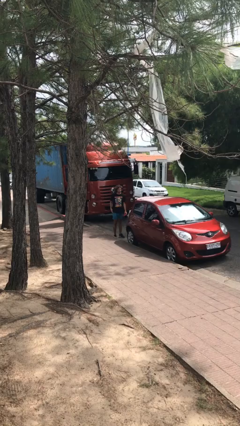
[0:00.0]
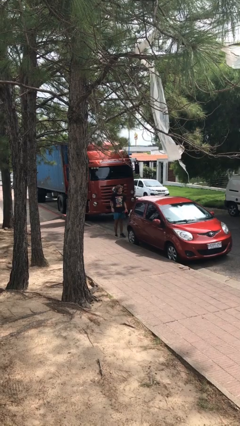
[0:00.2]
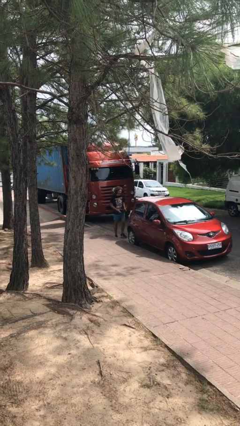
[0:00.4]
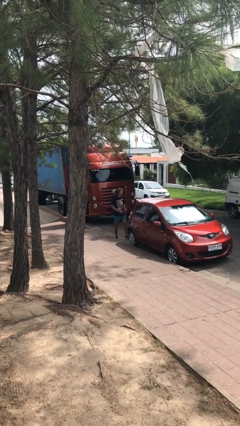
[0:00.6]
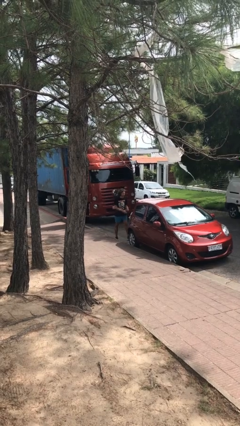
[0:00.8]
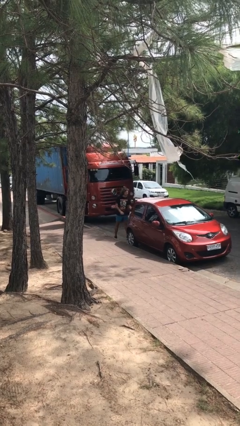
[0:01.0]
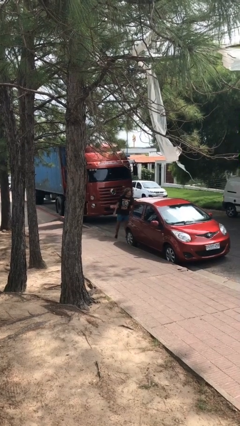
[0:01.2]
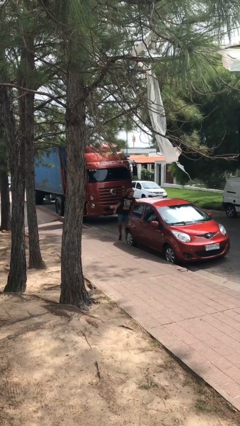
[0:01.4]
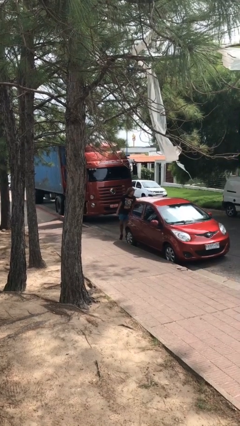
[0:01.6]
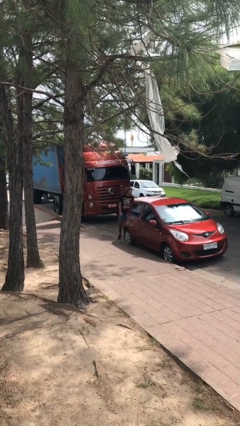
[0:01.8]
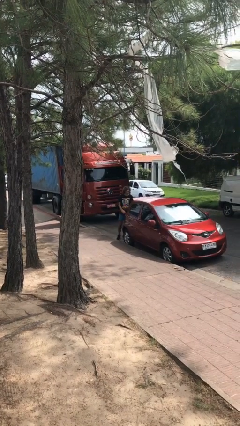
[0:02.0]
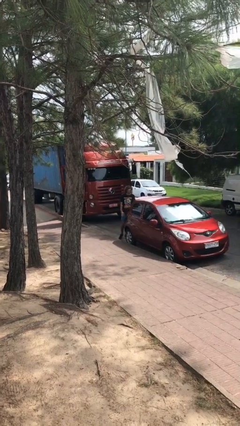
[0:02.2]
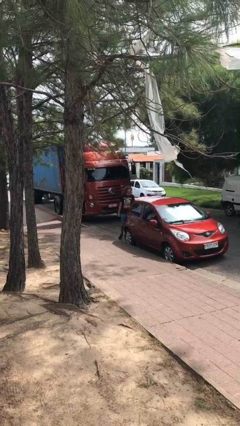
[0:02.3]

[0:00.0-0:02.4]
person loads car

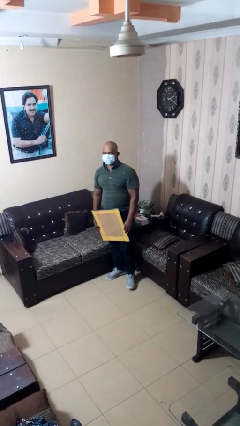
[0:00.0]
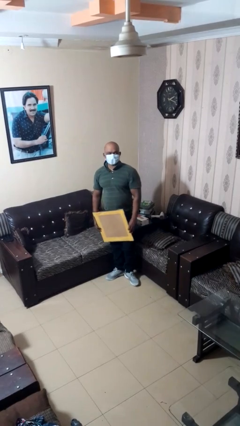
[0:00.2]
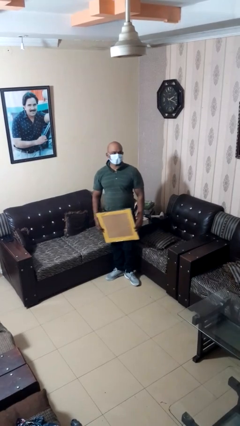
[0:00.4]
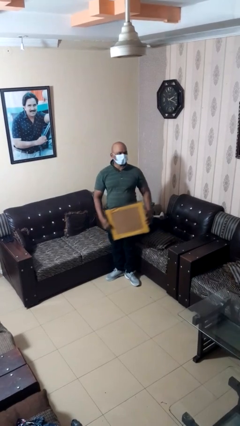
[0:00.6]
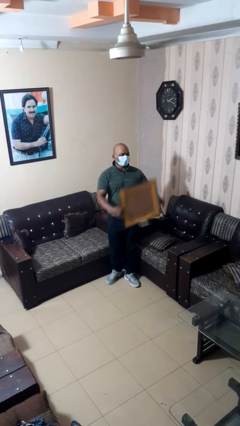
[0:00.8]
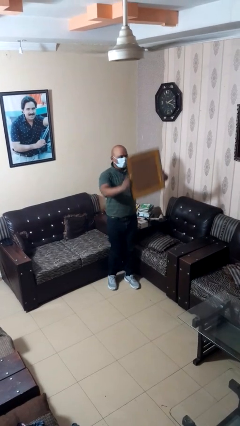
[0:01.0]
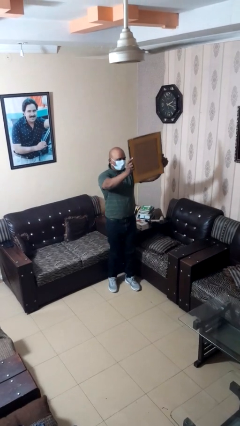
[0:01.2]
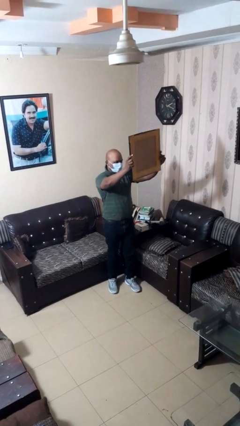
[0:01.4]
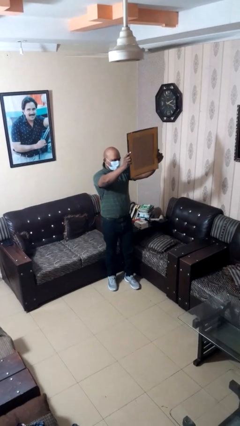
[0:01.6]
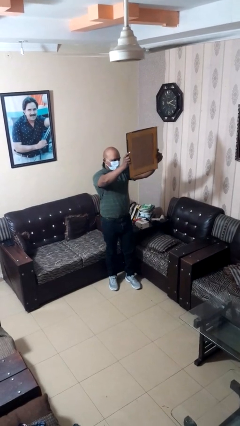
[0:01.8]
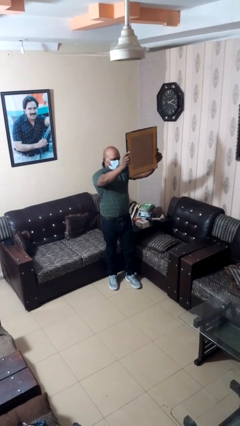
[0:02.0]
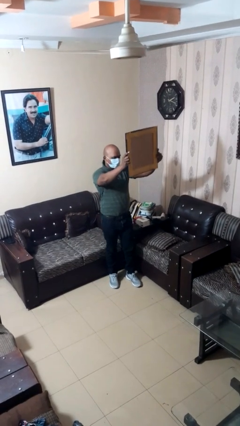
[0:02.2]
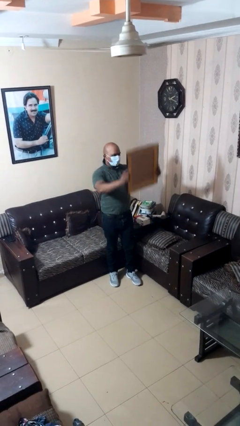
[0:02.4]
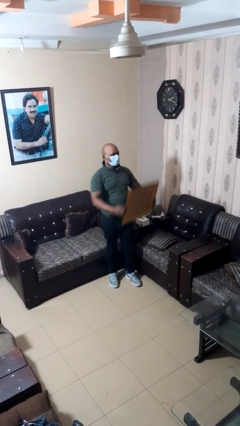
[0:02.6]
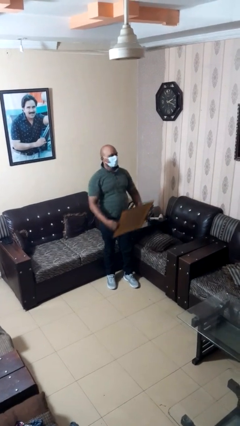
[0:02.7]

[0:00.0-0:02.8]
person holds object above head

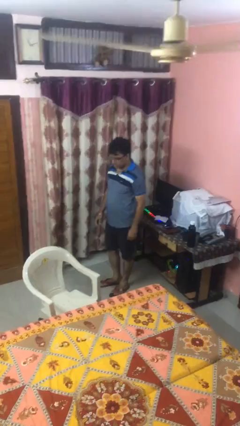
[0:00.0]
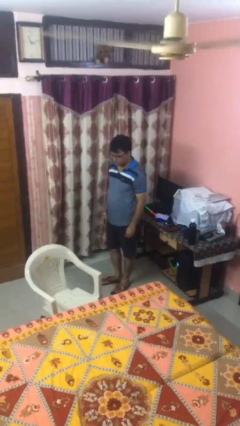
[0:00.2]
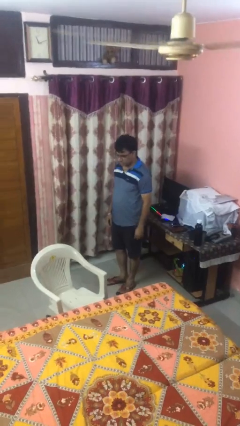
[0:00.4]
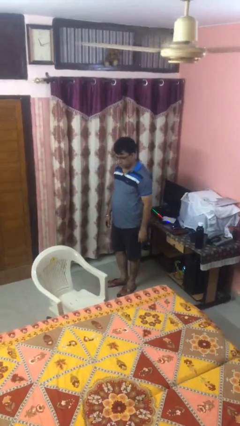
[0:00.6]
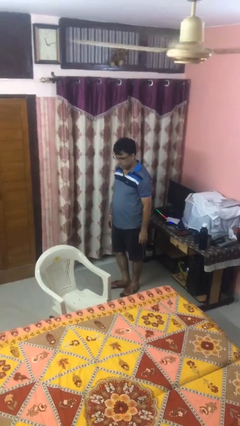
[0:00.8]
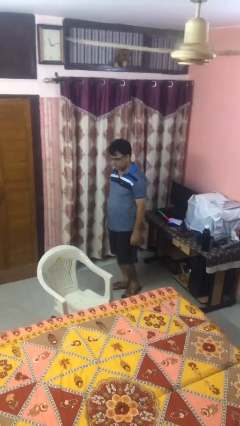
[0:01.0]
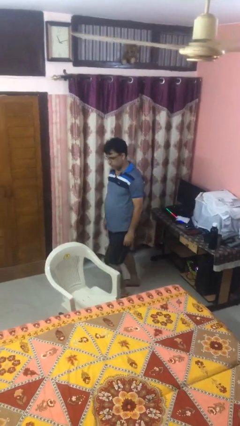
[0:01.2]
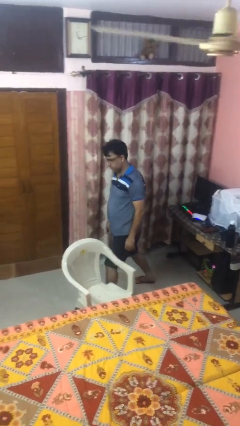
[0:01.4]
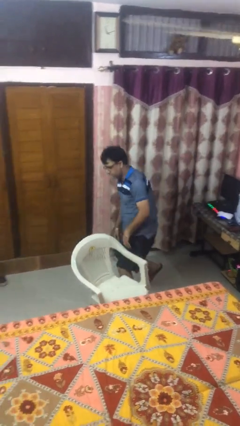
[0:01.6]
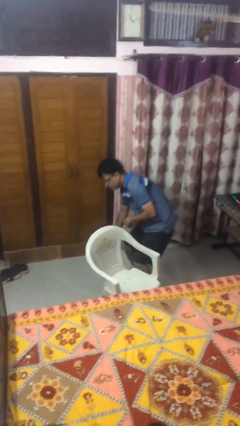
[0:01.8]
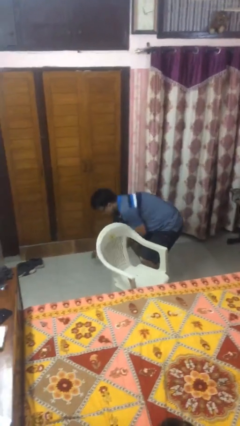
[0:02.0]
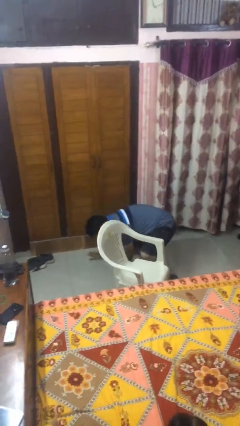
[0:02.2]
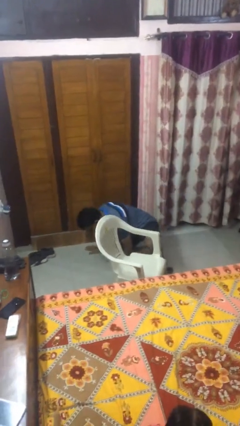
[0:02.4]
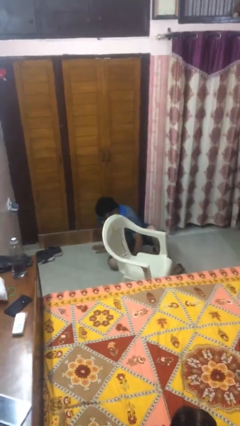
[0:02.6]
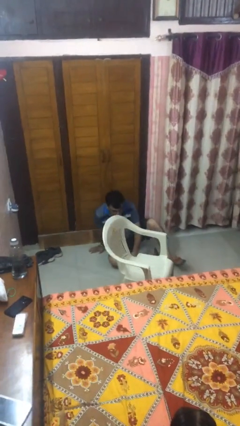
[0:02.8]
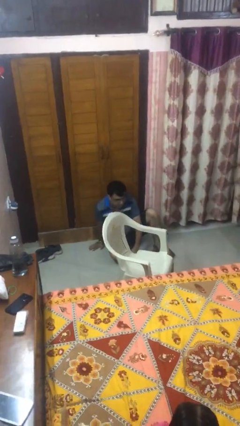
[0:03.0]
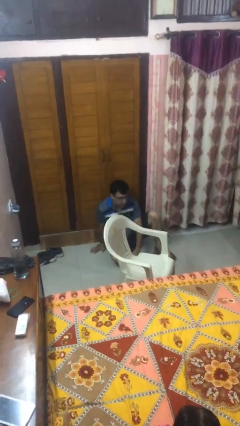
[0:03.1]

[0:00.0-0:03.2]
person trips on object on floor

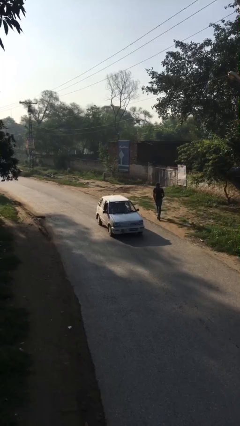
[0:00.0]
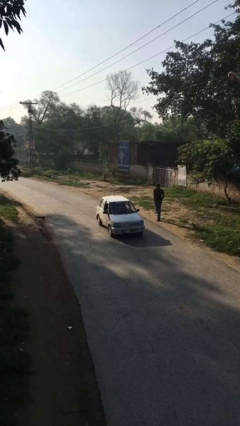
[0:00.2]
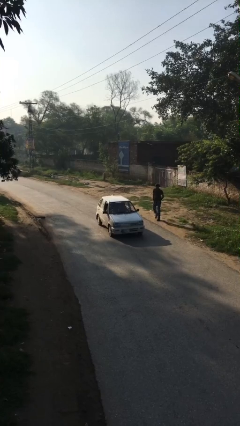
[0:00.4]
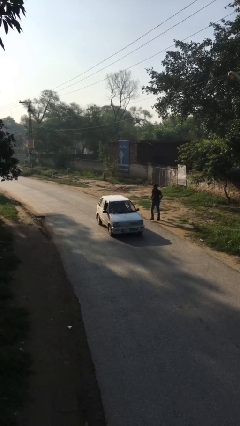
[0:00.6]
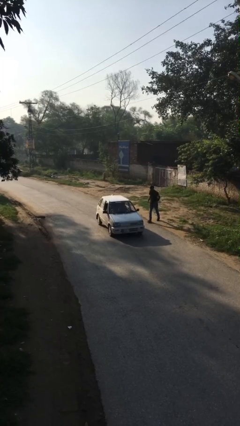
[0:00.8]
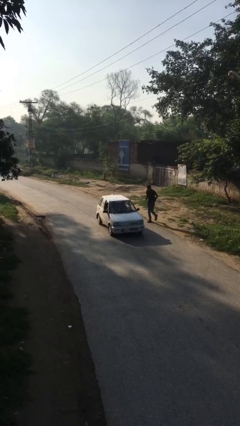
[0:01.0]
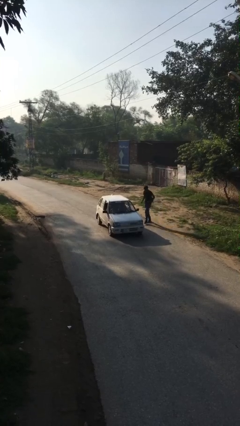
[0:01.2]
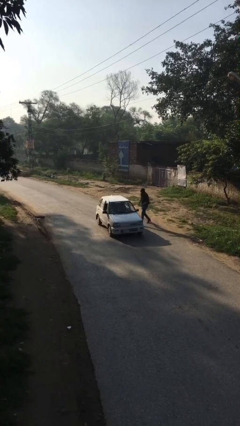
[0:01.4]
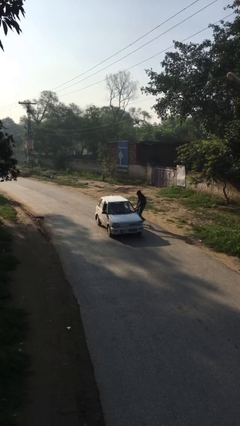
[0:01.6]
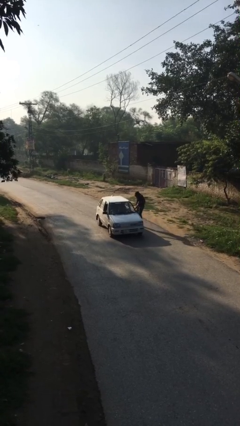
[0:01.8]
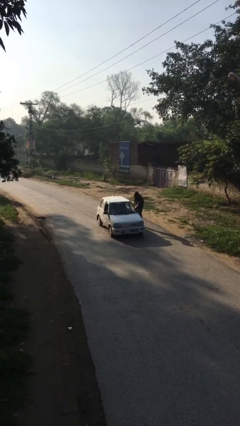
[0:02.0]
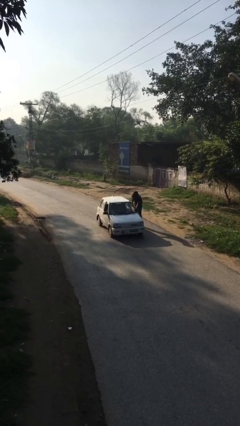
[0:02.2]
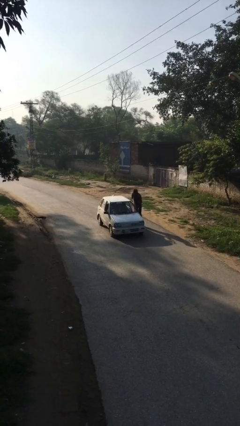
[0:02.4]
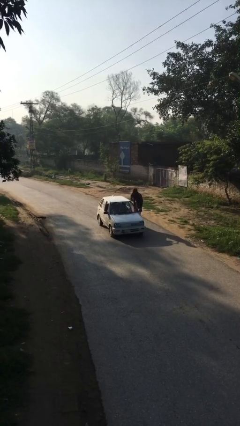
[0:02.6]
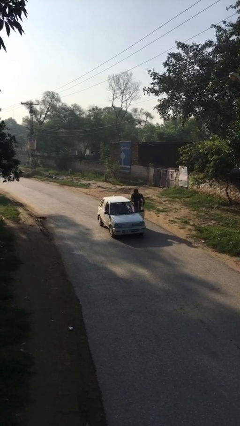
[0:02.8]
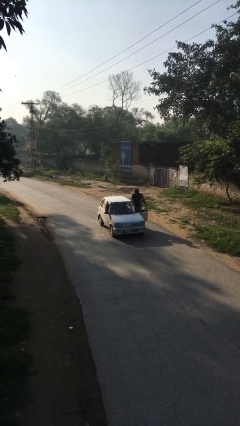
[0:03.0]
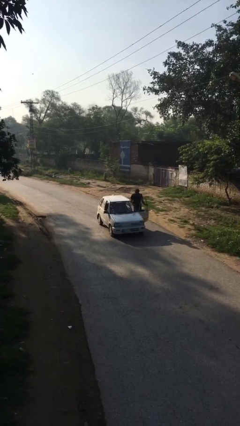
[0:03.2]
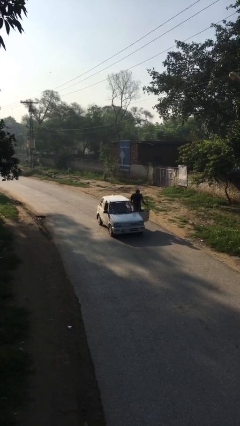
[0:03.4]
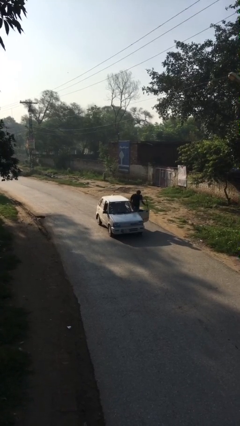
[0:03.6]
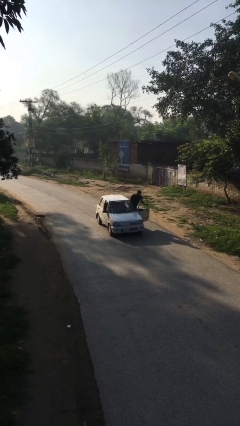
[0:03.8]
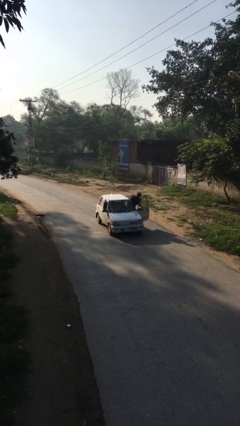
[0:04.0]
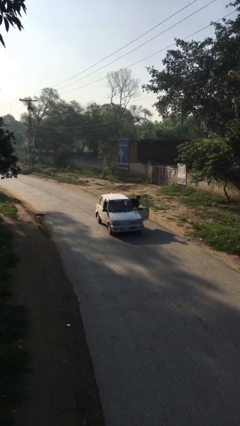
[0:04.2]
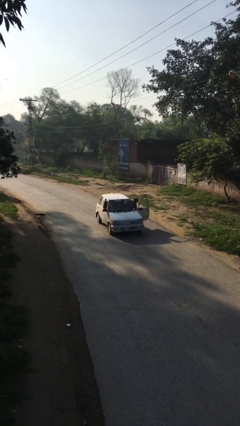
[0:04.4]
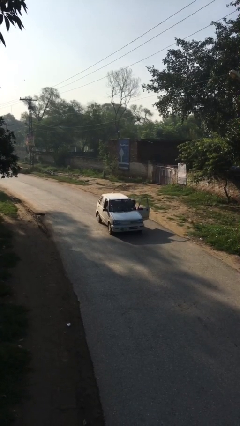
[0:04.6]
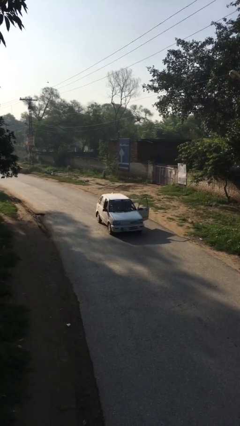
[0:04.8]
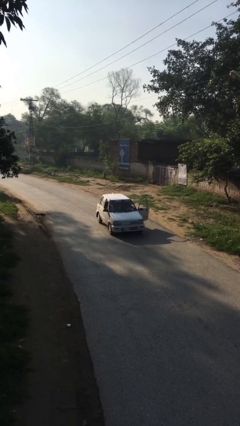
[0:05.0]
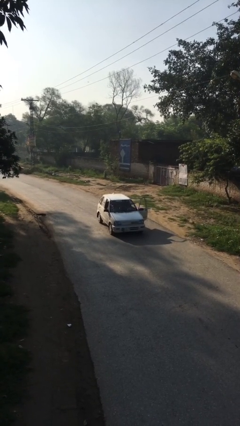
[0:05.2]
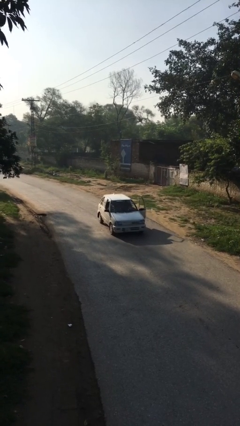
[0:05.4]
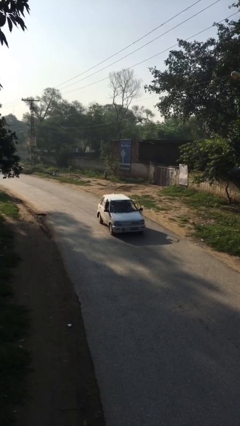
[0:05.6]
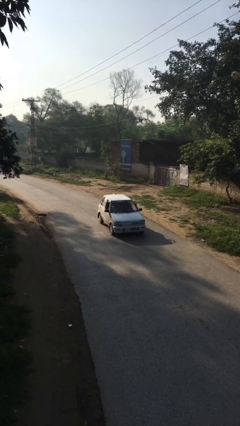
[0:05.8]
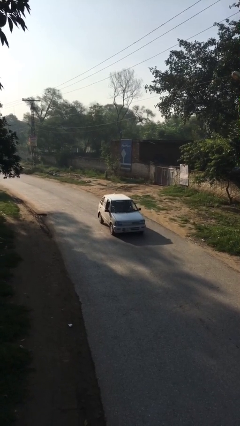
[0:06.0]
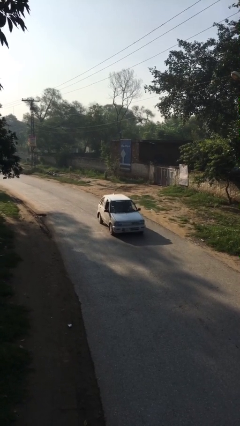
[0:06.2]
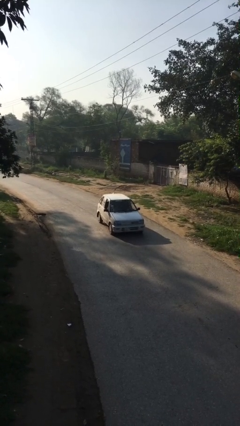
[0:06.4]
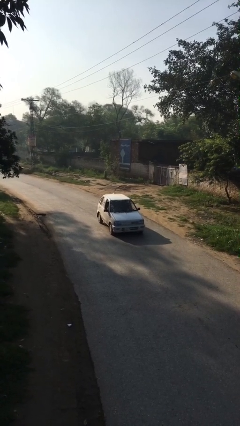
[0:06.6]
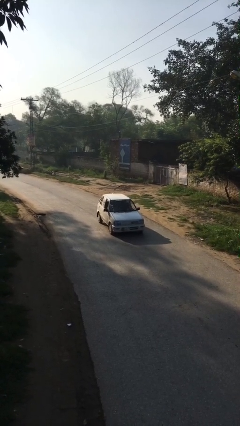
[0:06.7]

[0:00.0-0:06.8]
car picks up person

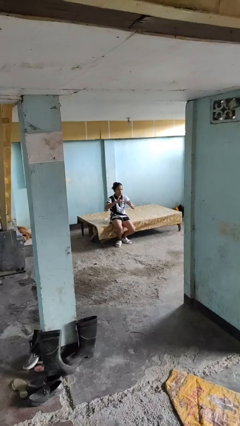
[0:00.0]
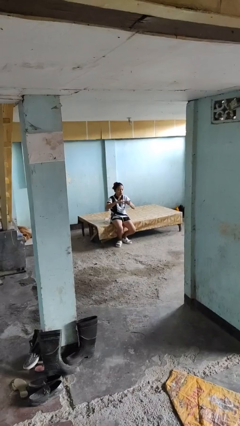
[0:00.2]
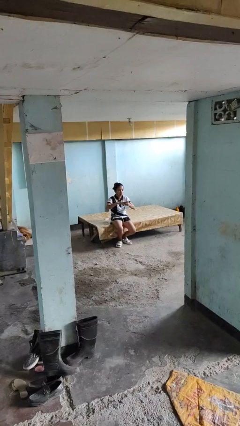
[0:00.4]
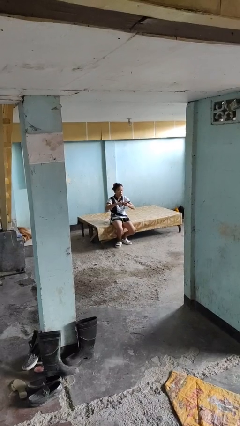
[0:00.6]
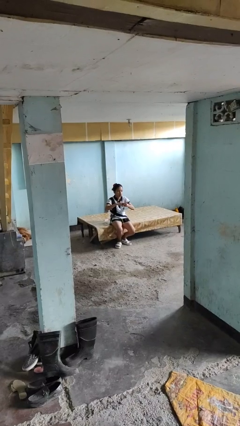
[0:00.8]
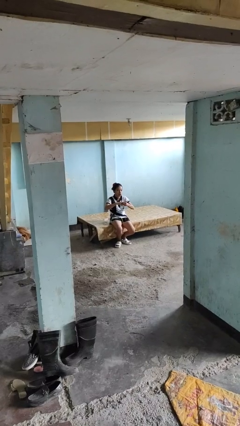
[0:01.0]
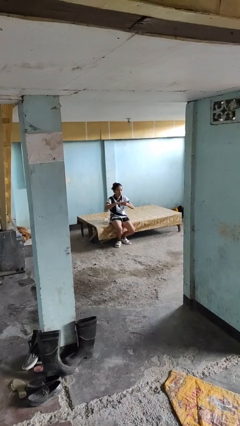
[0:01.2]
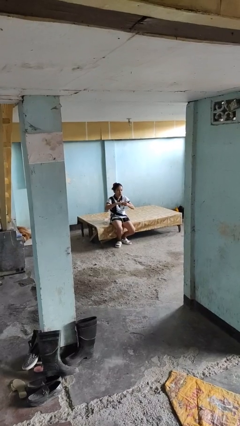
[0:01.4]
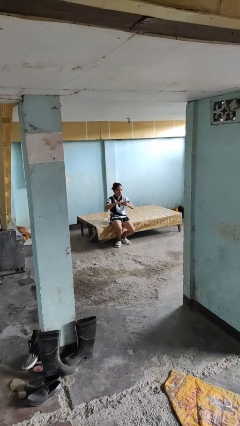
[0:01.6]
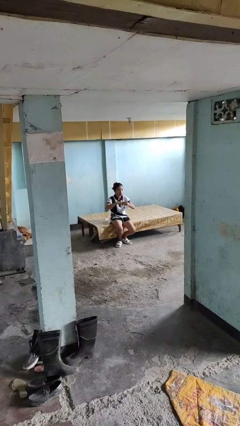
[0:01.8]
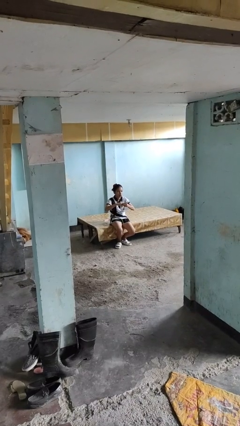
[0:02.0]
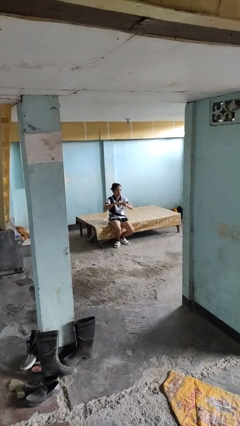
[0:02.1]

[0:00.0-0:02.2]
person puts on ring
